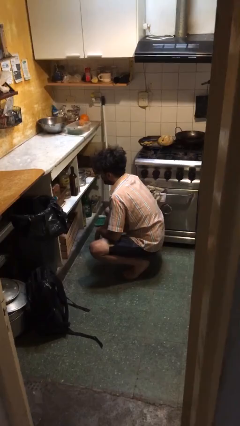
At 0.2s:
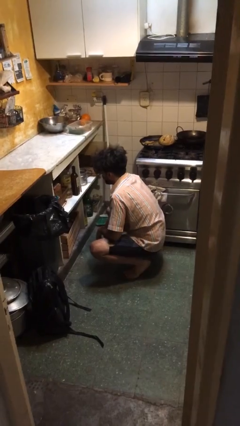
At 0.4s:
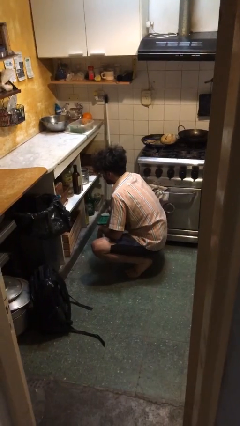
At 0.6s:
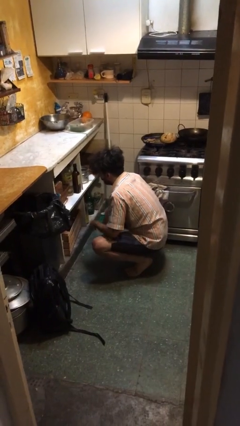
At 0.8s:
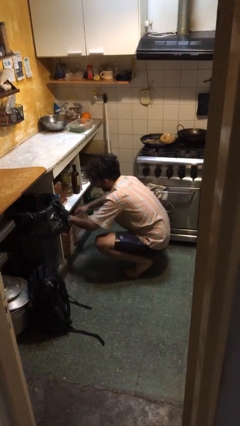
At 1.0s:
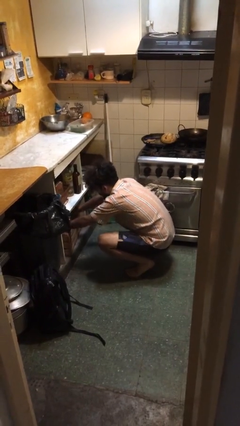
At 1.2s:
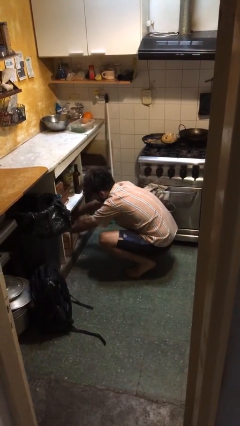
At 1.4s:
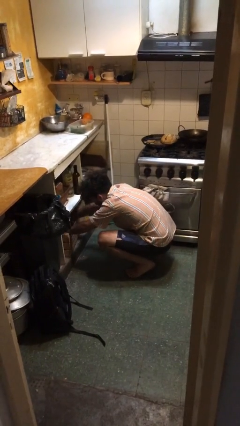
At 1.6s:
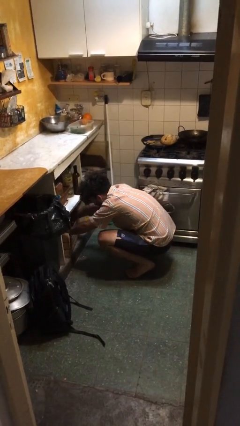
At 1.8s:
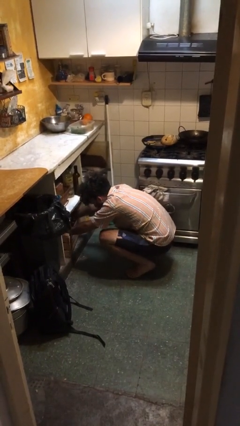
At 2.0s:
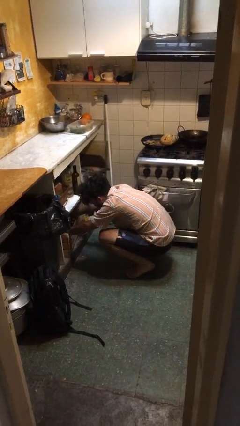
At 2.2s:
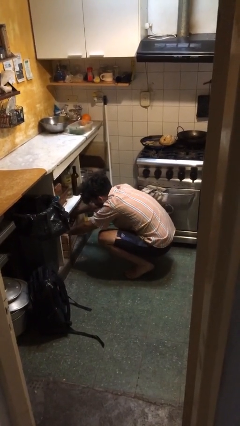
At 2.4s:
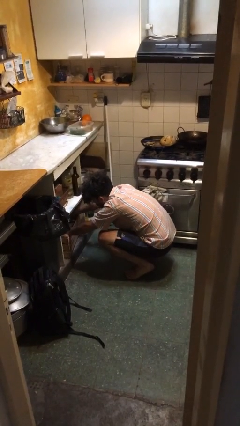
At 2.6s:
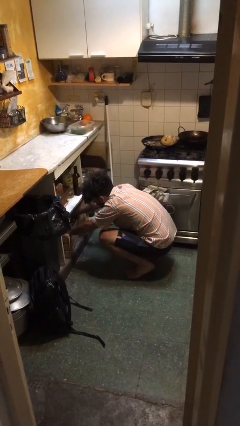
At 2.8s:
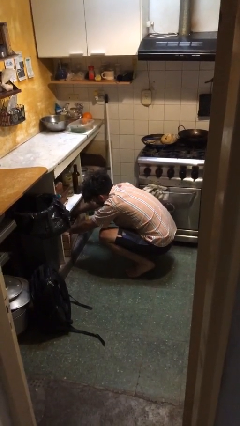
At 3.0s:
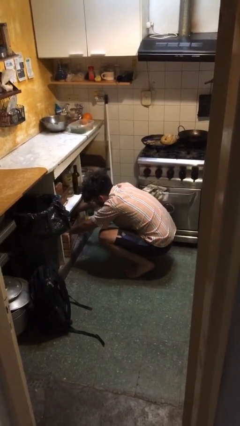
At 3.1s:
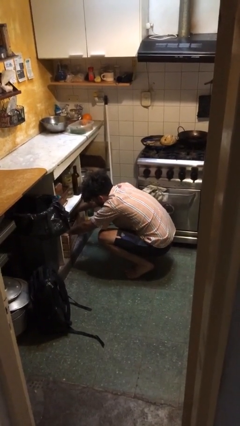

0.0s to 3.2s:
person searches in cabinet

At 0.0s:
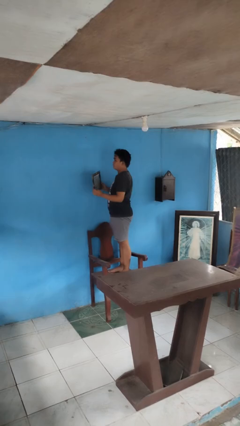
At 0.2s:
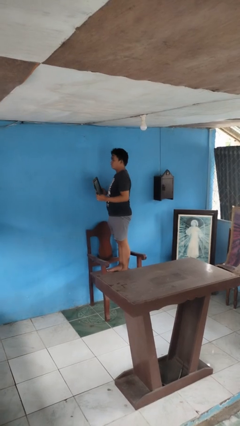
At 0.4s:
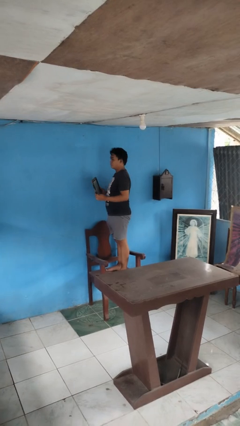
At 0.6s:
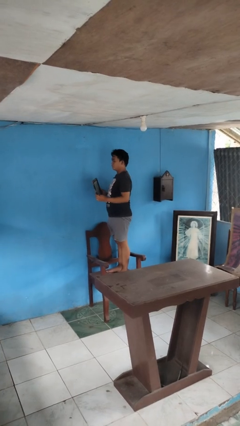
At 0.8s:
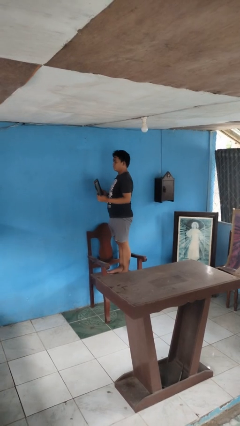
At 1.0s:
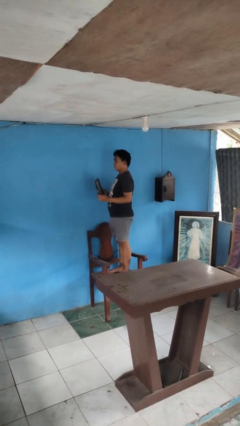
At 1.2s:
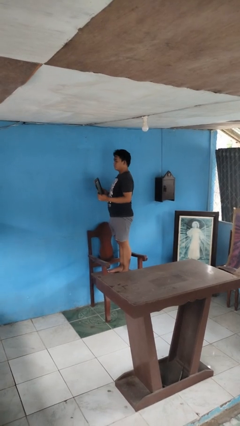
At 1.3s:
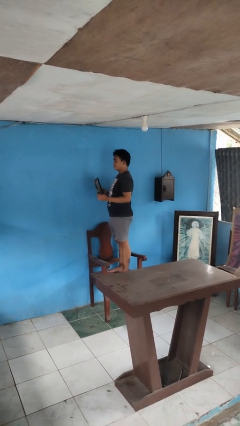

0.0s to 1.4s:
person takes down picture frame

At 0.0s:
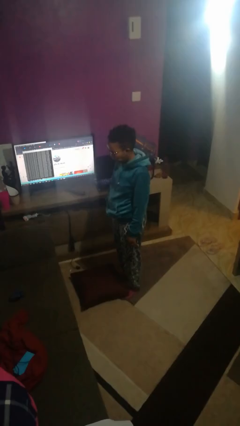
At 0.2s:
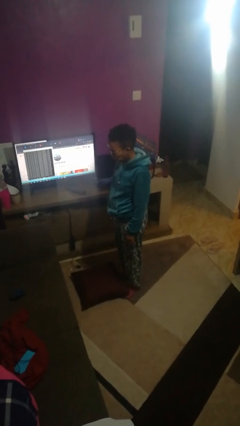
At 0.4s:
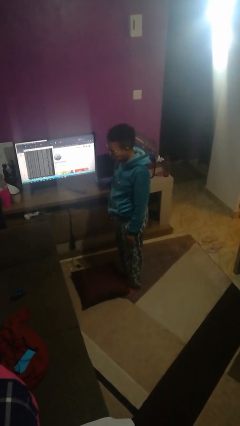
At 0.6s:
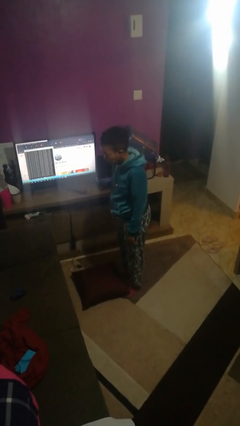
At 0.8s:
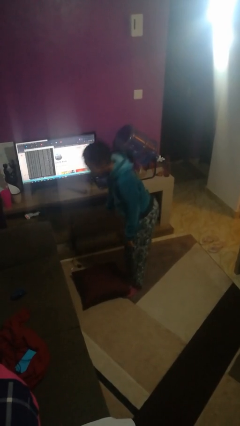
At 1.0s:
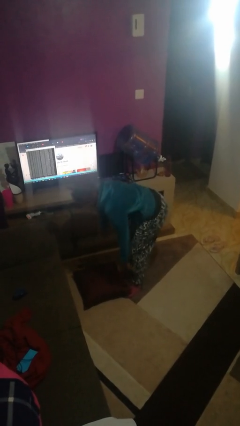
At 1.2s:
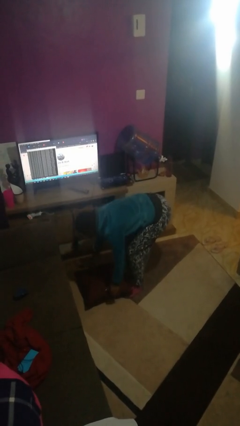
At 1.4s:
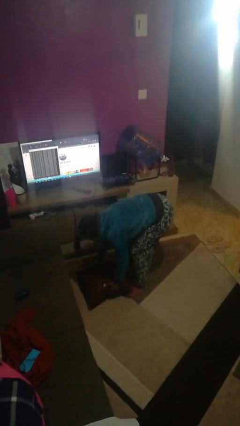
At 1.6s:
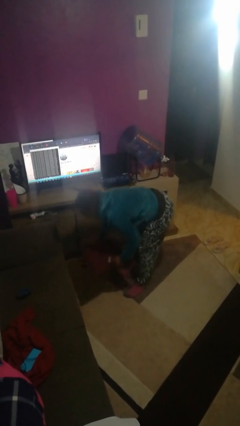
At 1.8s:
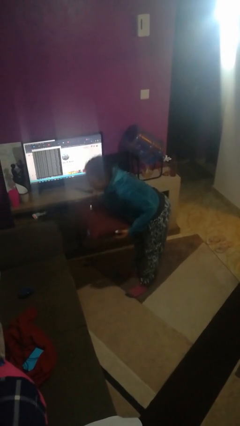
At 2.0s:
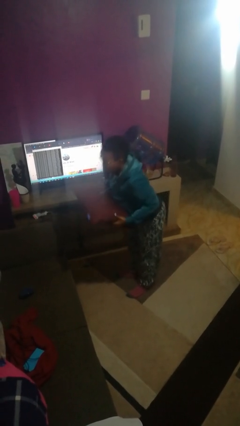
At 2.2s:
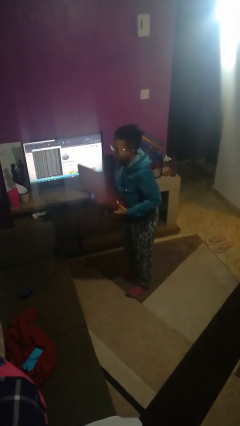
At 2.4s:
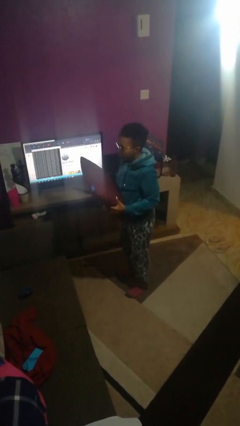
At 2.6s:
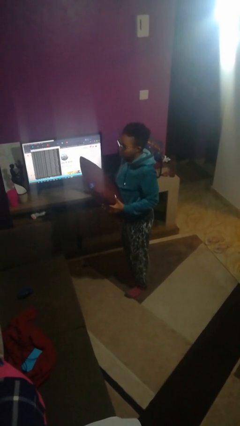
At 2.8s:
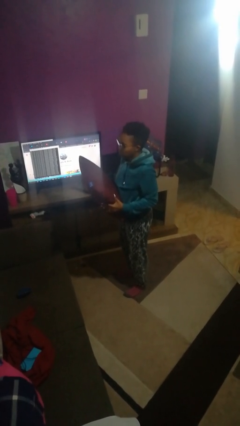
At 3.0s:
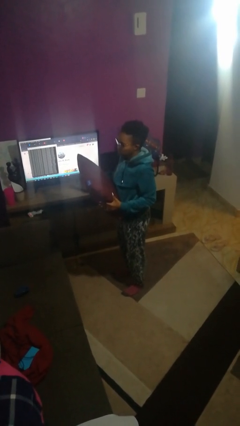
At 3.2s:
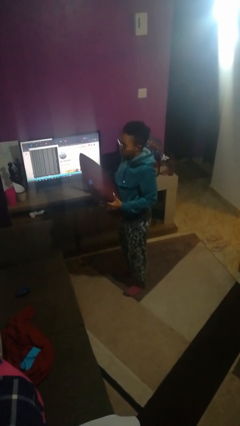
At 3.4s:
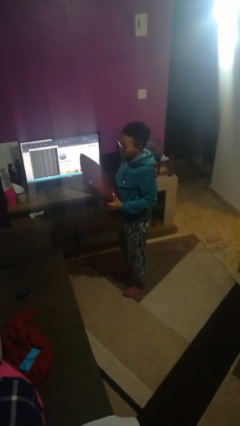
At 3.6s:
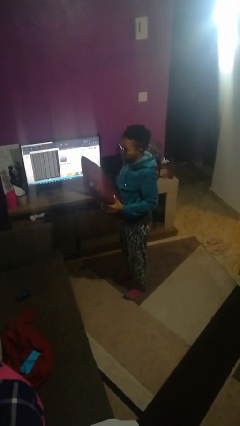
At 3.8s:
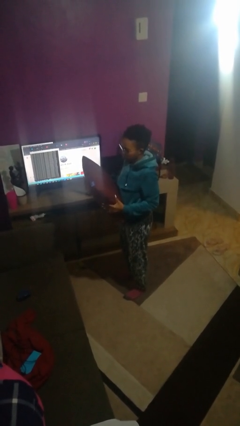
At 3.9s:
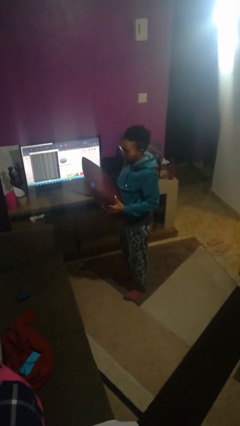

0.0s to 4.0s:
person picks up object from floor

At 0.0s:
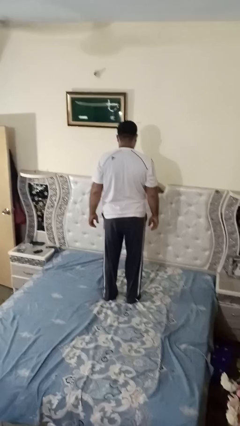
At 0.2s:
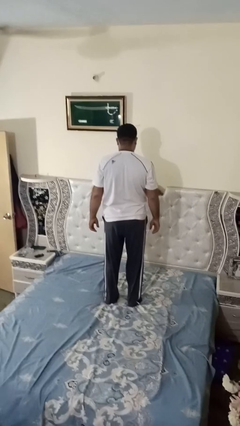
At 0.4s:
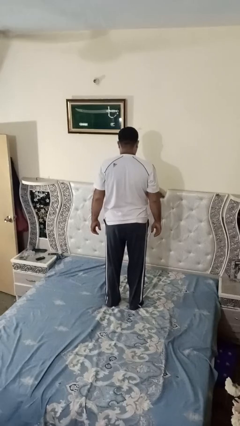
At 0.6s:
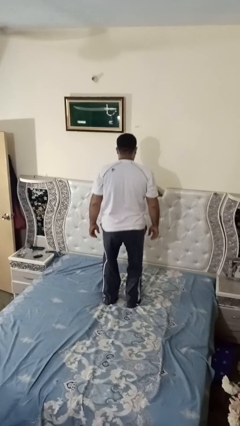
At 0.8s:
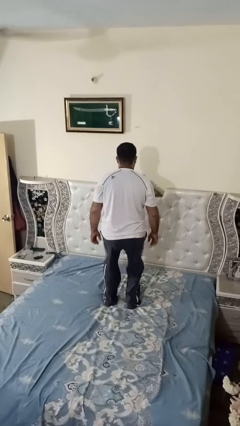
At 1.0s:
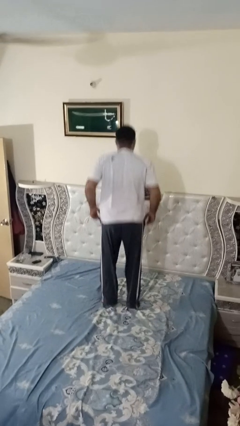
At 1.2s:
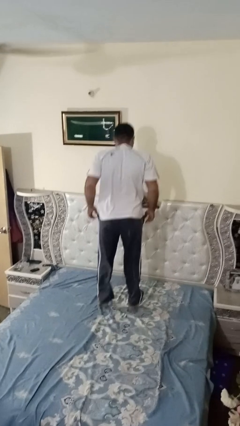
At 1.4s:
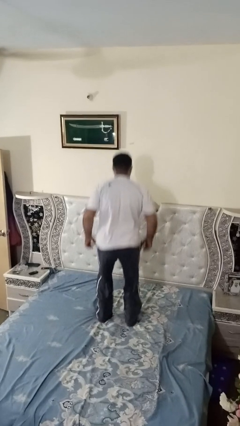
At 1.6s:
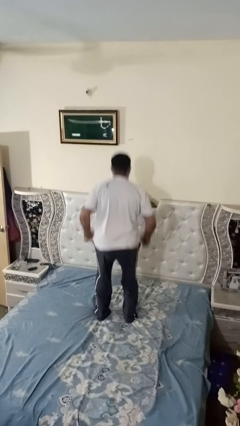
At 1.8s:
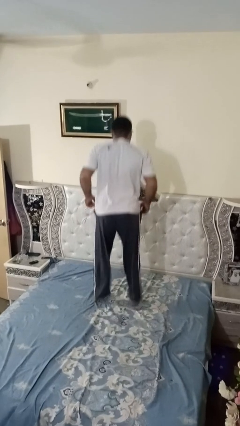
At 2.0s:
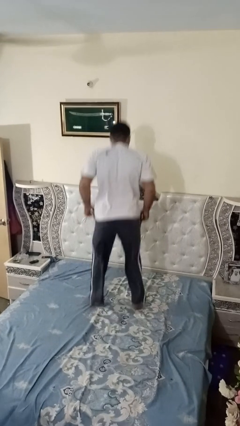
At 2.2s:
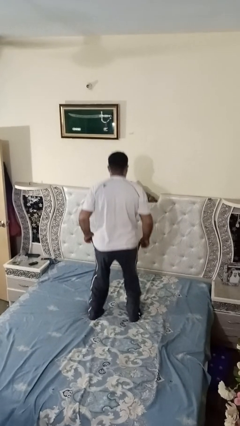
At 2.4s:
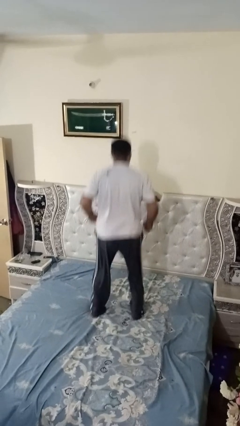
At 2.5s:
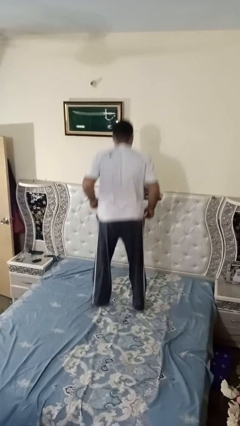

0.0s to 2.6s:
person jumps on bed

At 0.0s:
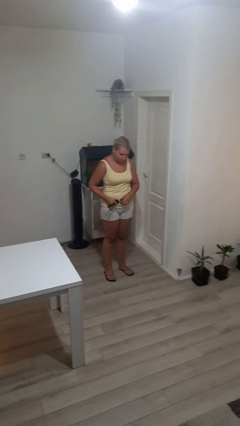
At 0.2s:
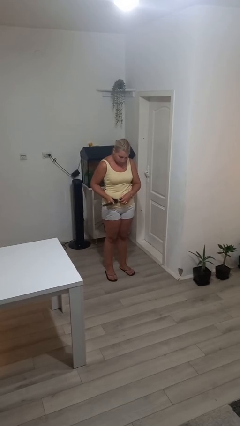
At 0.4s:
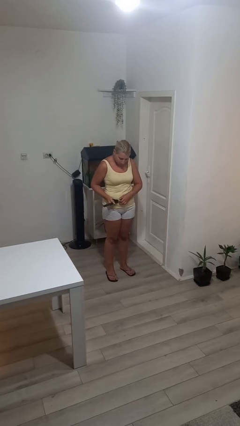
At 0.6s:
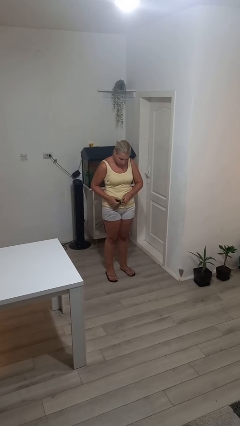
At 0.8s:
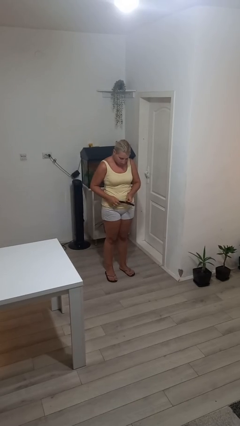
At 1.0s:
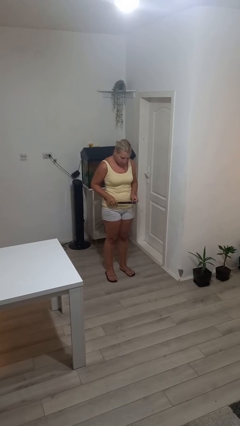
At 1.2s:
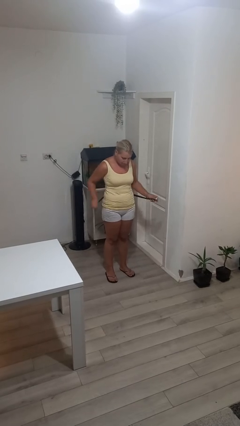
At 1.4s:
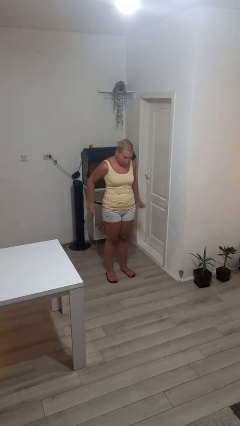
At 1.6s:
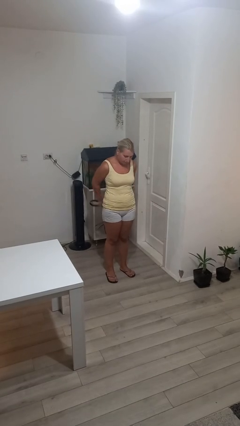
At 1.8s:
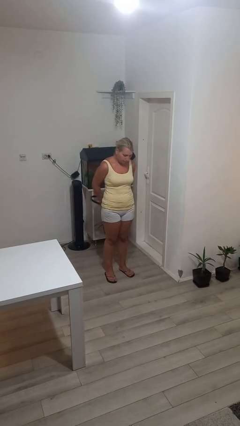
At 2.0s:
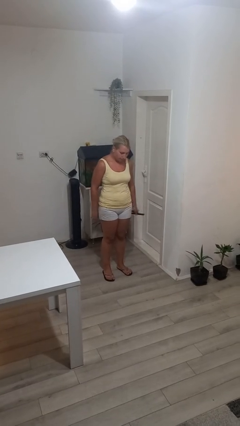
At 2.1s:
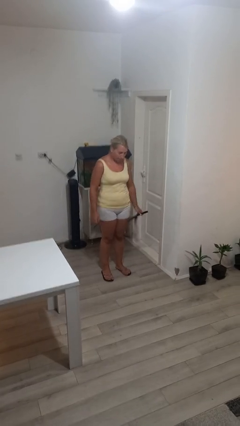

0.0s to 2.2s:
person takes off belt

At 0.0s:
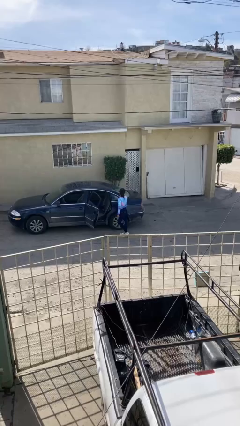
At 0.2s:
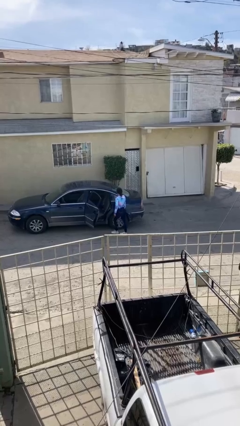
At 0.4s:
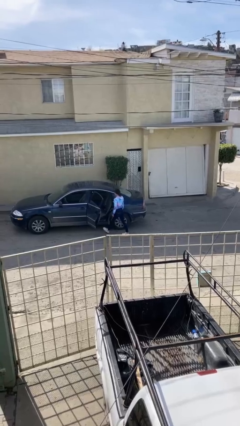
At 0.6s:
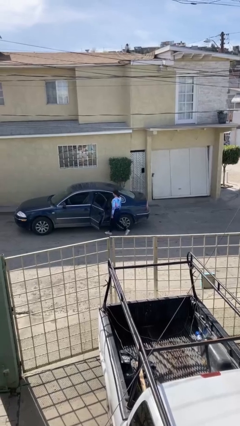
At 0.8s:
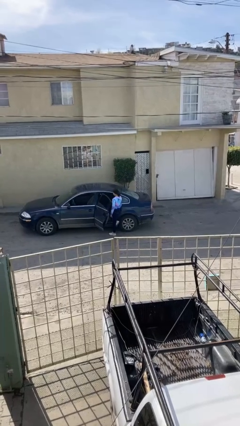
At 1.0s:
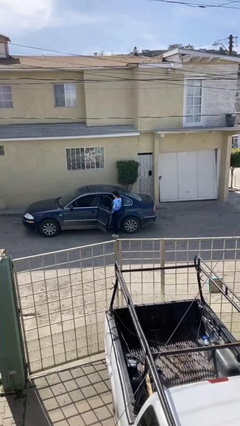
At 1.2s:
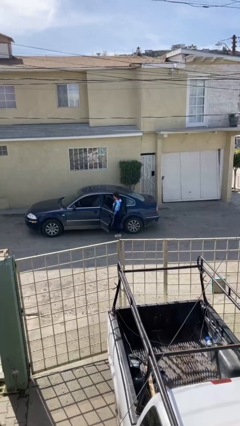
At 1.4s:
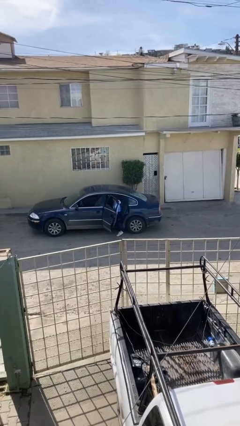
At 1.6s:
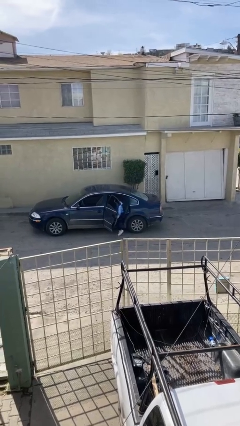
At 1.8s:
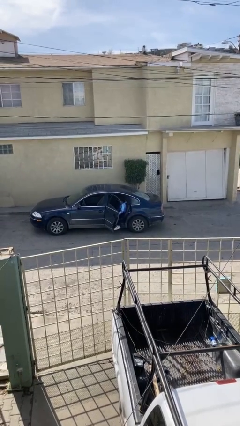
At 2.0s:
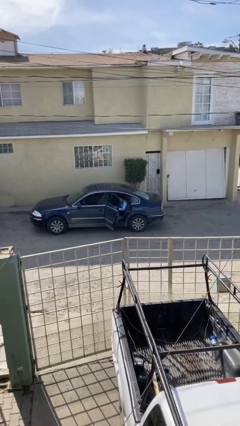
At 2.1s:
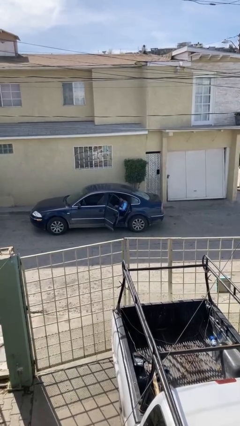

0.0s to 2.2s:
person enters car

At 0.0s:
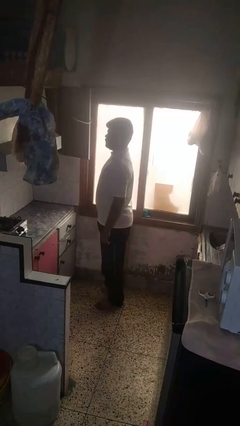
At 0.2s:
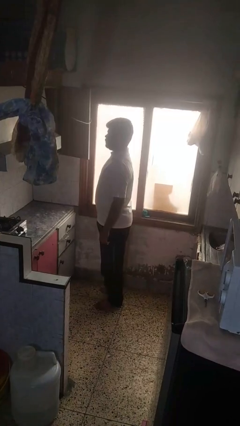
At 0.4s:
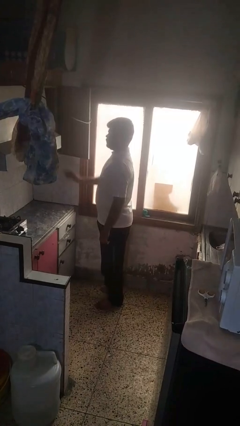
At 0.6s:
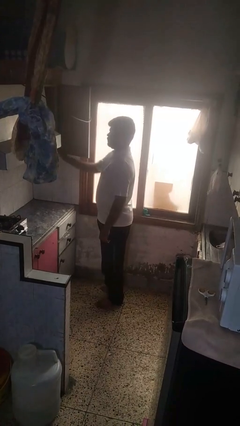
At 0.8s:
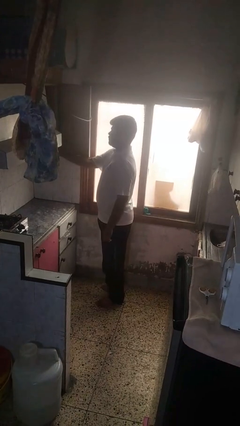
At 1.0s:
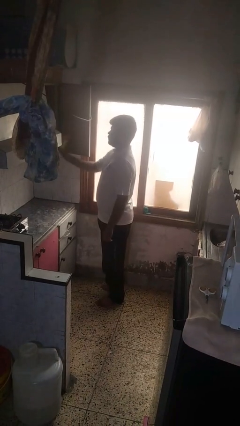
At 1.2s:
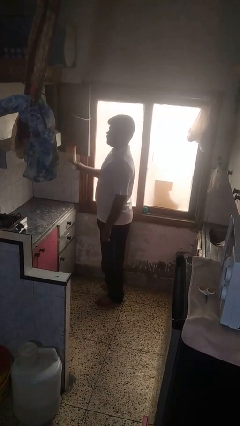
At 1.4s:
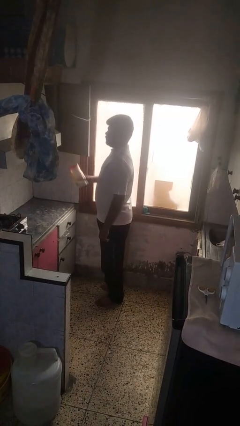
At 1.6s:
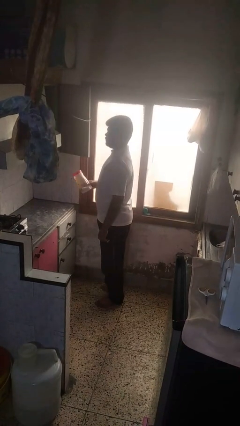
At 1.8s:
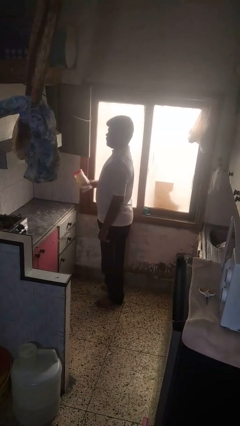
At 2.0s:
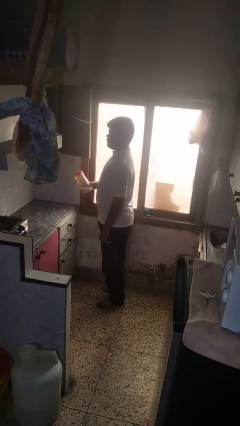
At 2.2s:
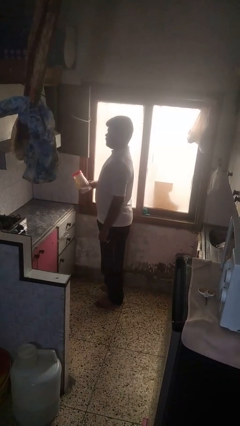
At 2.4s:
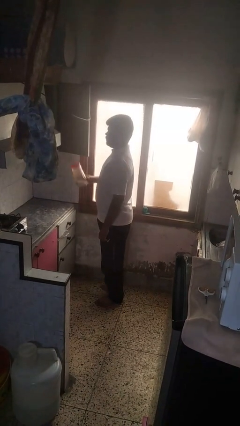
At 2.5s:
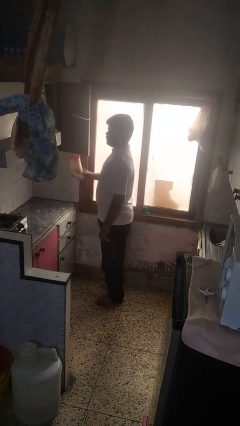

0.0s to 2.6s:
person picks up object from cabinet
